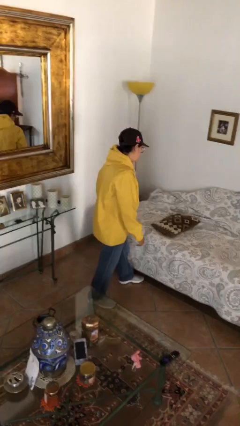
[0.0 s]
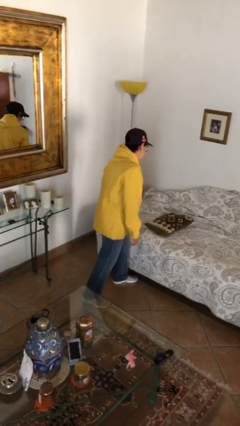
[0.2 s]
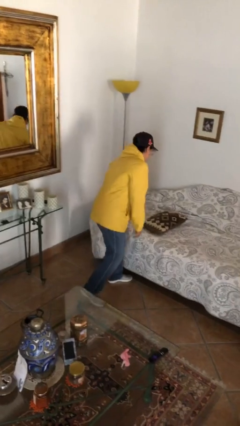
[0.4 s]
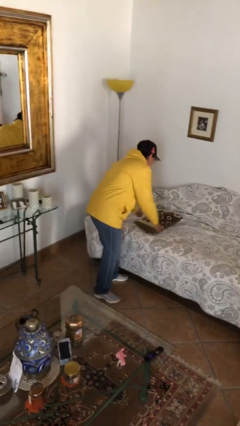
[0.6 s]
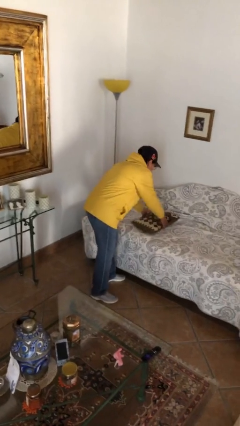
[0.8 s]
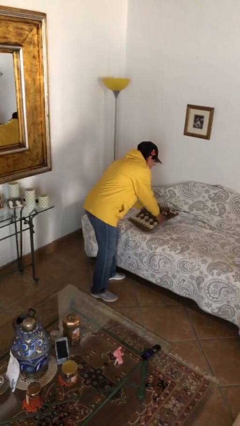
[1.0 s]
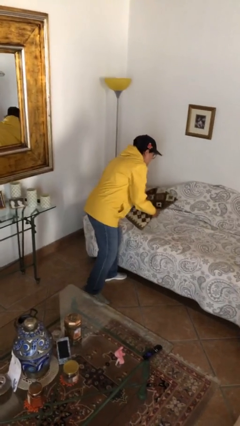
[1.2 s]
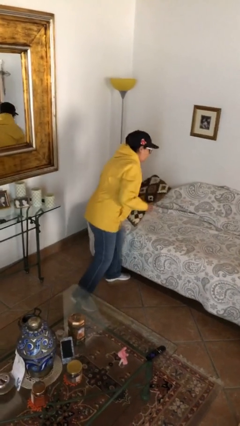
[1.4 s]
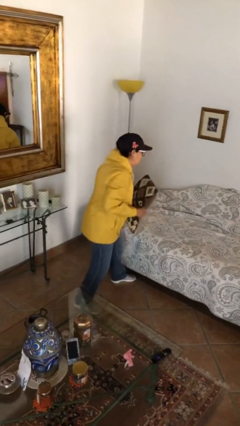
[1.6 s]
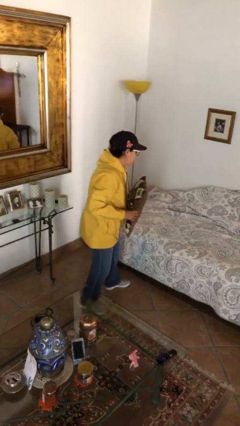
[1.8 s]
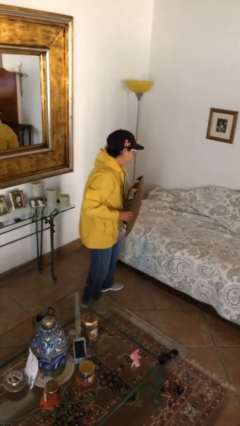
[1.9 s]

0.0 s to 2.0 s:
person picks up object from bed

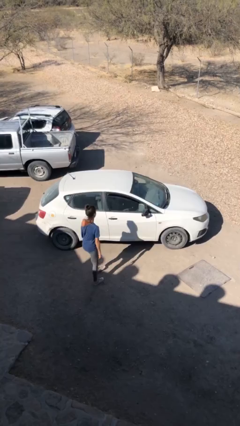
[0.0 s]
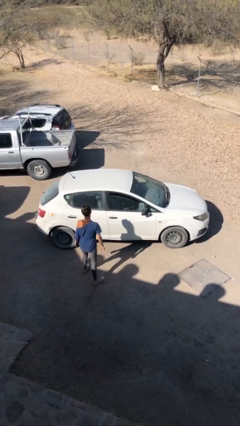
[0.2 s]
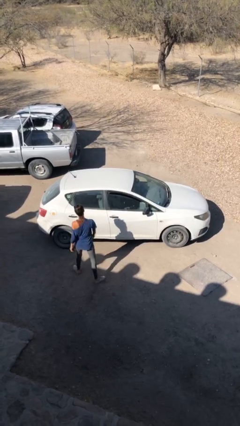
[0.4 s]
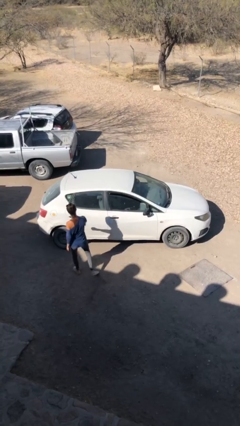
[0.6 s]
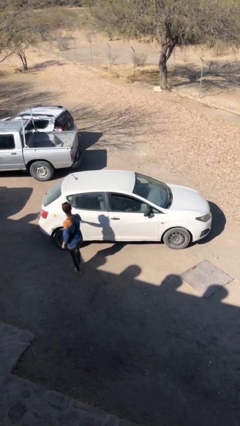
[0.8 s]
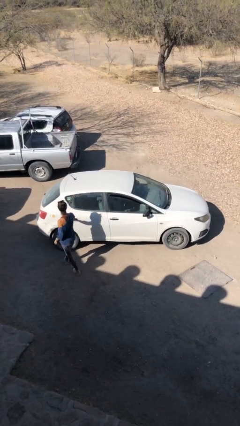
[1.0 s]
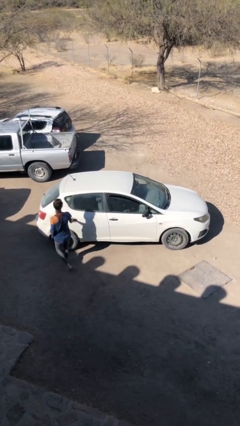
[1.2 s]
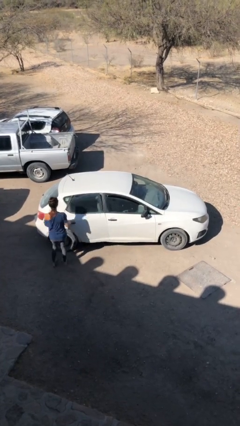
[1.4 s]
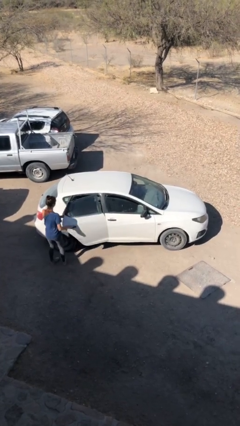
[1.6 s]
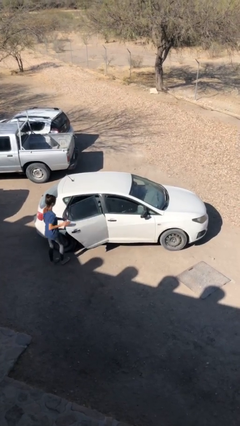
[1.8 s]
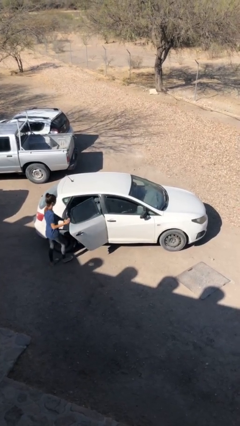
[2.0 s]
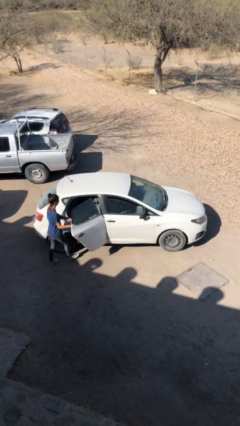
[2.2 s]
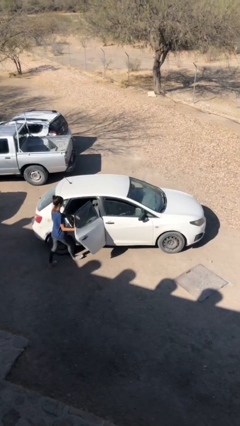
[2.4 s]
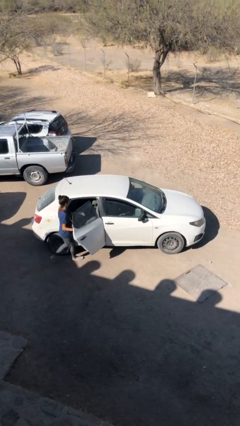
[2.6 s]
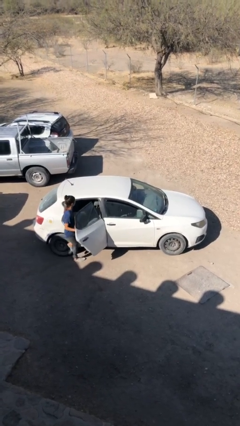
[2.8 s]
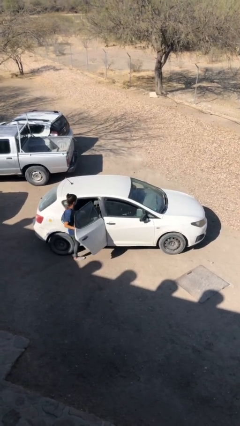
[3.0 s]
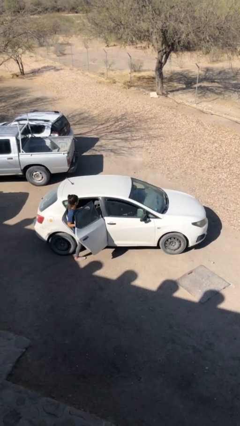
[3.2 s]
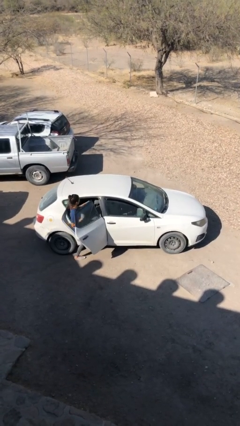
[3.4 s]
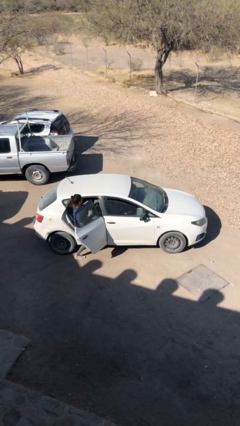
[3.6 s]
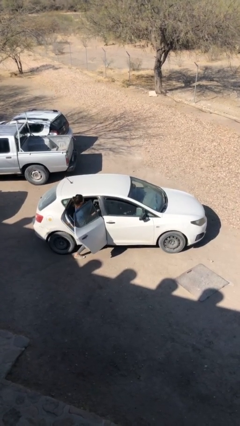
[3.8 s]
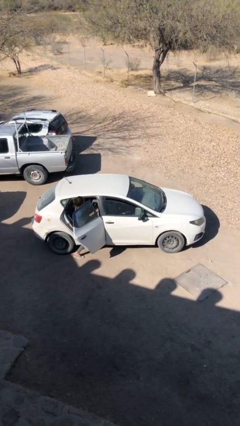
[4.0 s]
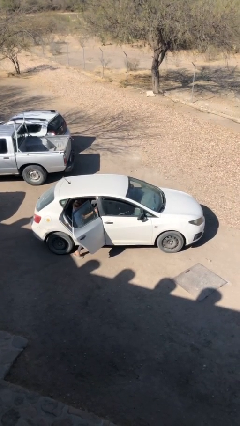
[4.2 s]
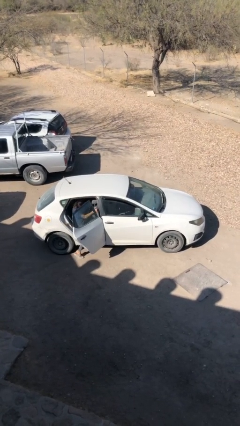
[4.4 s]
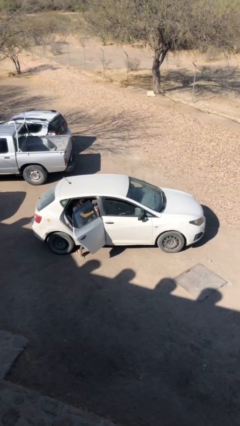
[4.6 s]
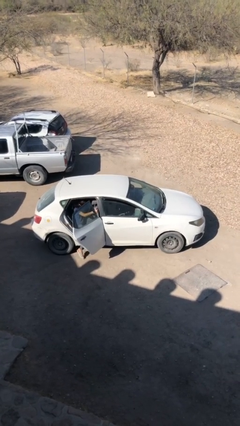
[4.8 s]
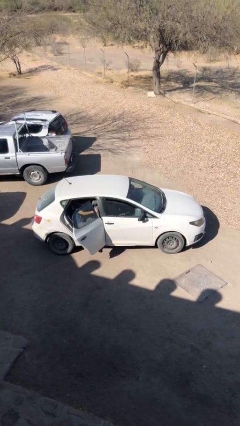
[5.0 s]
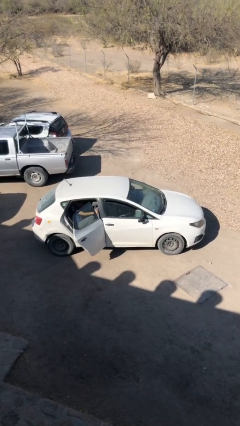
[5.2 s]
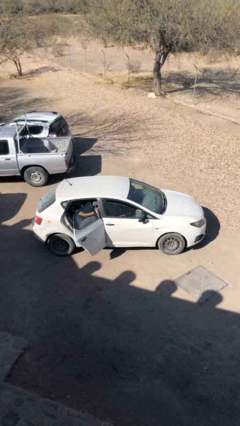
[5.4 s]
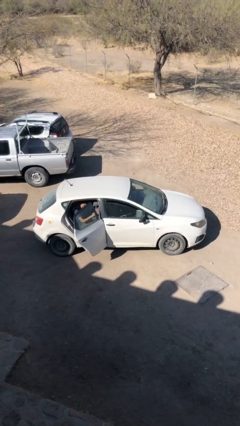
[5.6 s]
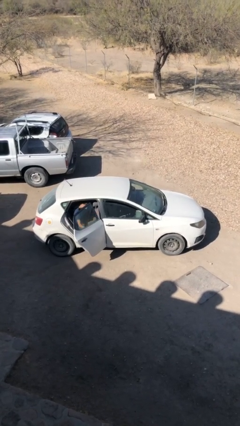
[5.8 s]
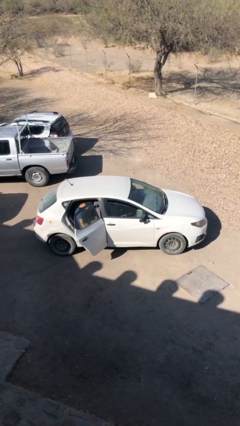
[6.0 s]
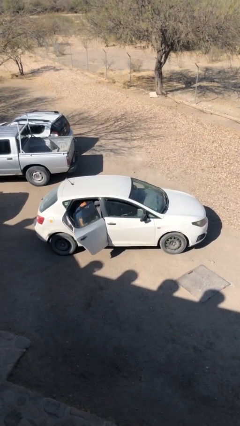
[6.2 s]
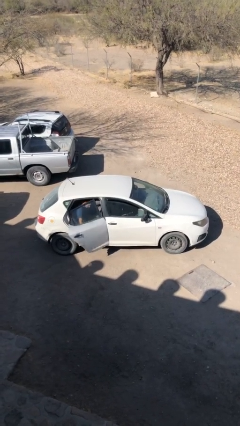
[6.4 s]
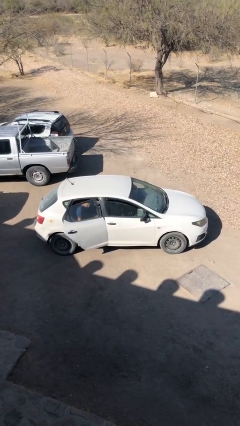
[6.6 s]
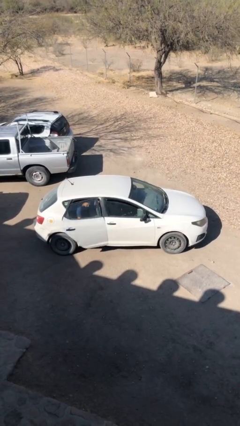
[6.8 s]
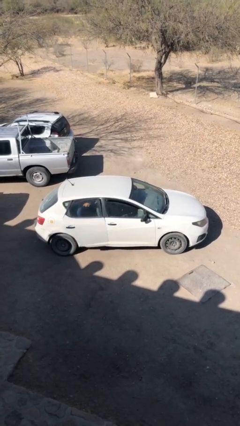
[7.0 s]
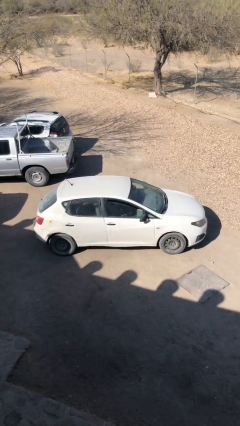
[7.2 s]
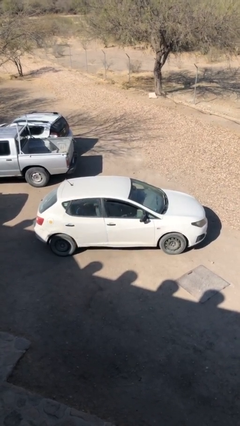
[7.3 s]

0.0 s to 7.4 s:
car picks up person

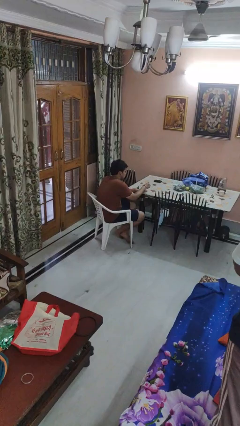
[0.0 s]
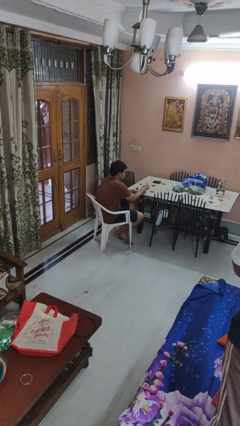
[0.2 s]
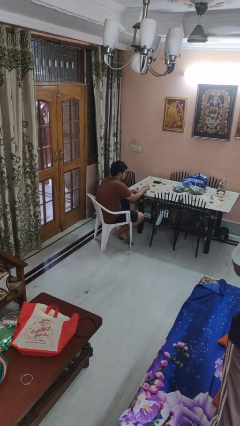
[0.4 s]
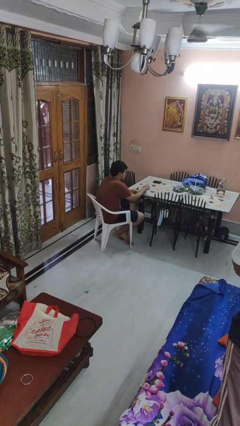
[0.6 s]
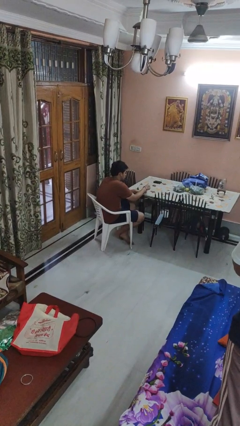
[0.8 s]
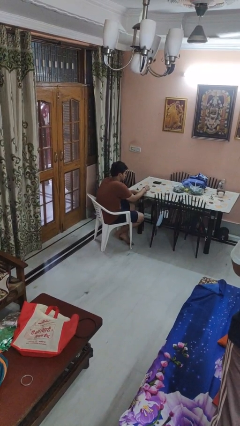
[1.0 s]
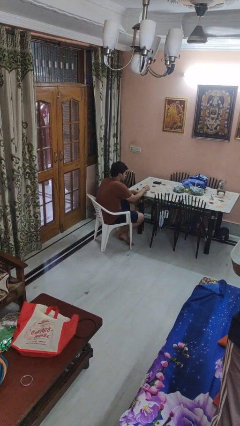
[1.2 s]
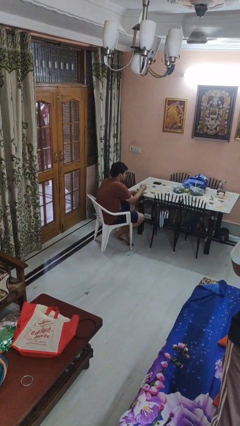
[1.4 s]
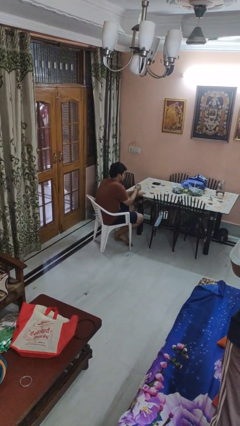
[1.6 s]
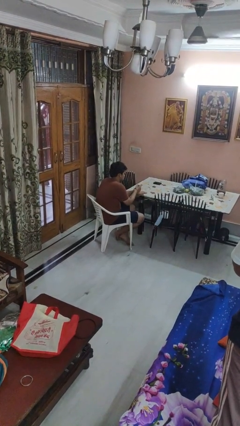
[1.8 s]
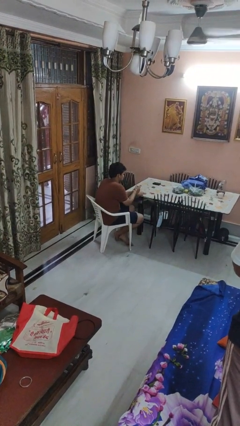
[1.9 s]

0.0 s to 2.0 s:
person paints fingernails

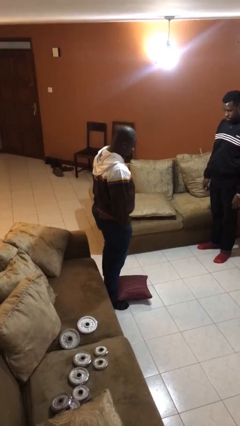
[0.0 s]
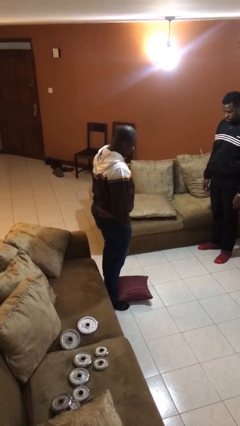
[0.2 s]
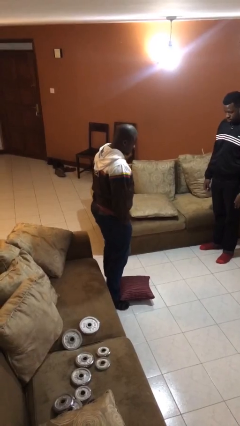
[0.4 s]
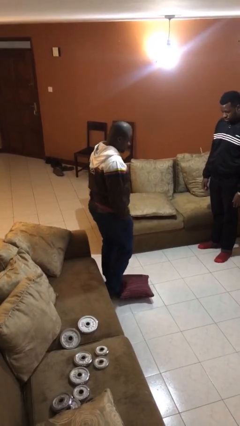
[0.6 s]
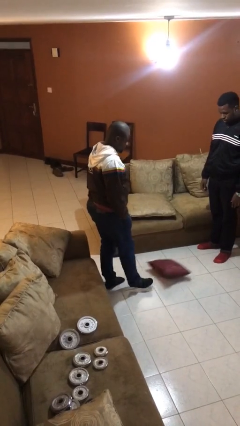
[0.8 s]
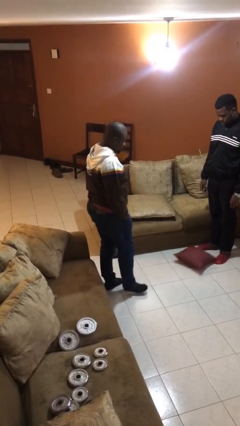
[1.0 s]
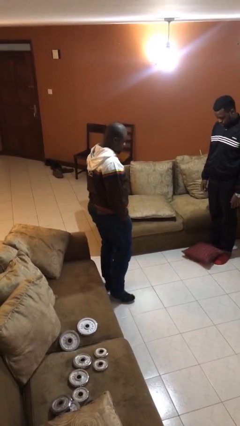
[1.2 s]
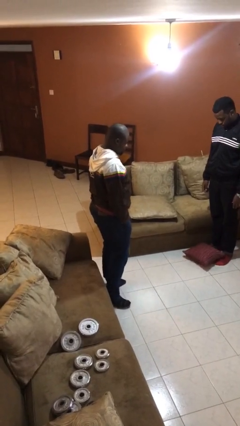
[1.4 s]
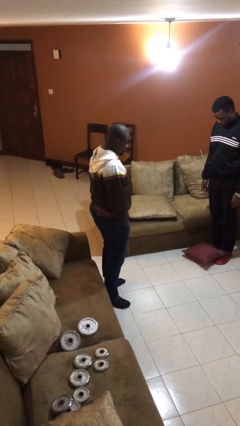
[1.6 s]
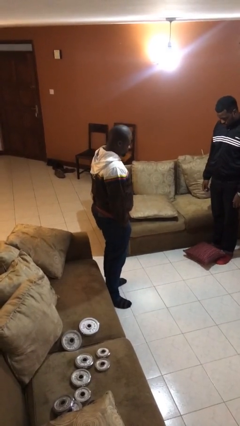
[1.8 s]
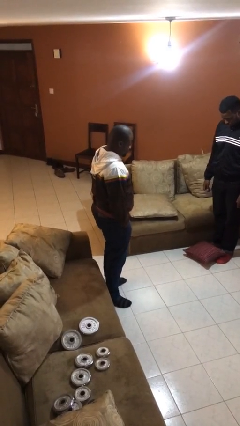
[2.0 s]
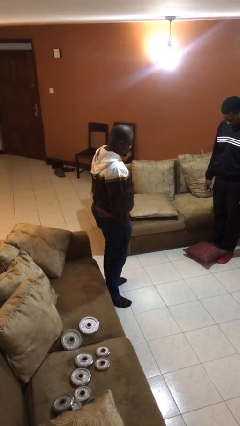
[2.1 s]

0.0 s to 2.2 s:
person kicks object to person

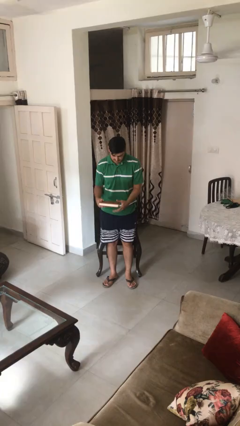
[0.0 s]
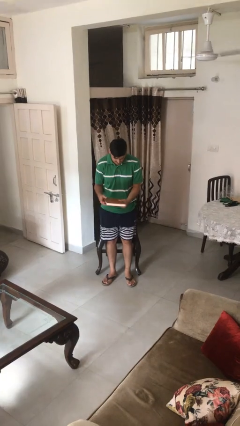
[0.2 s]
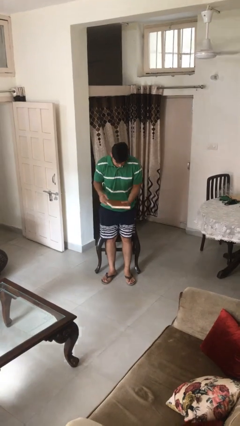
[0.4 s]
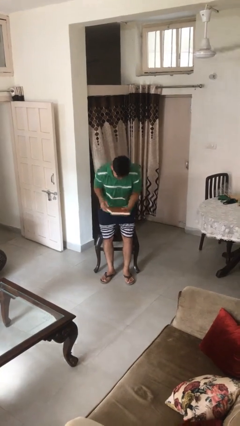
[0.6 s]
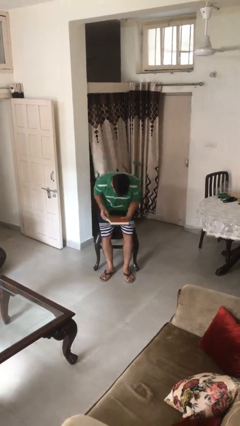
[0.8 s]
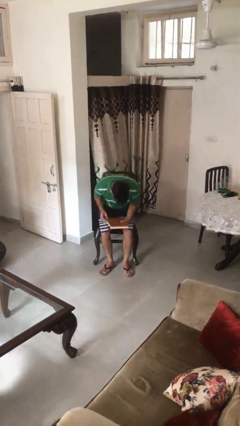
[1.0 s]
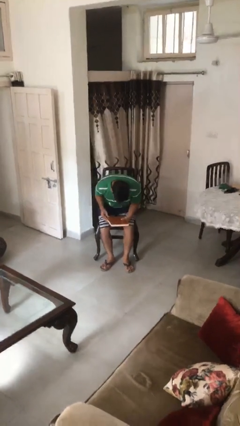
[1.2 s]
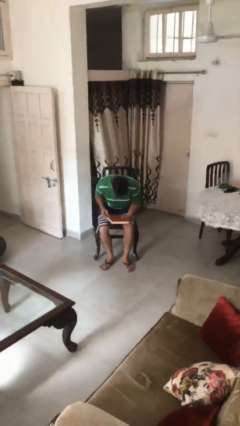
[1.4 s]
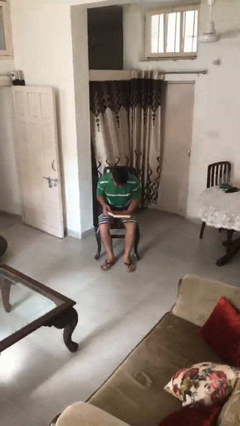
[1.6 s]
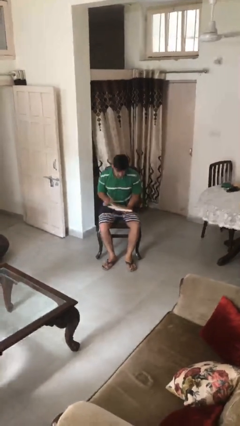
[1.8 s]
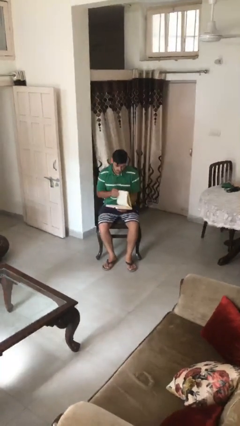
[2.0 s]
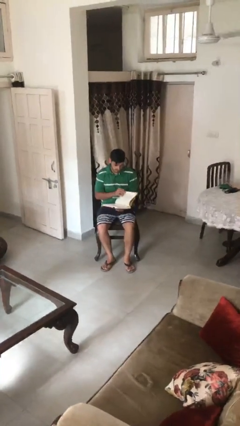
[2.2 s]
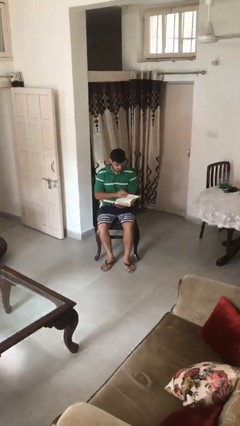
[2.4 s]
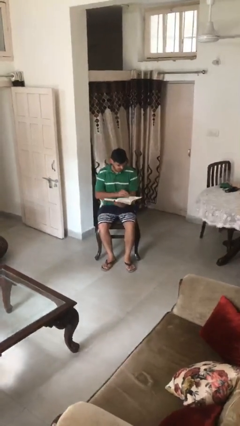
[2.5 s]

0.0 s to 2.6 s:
person sits down

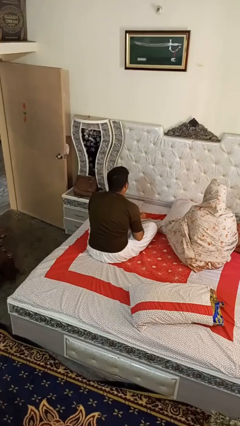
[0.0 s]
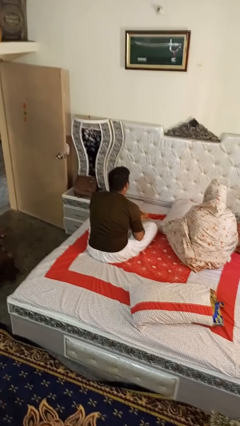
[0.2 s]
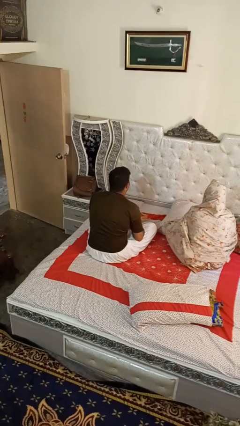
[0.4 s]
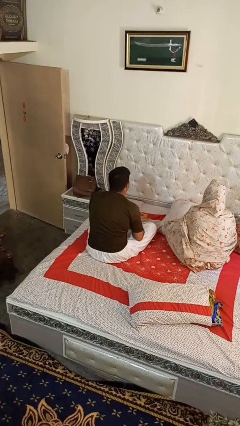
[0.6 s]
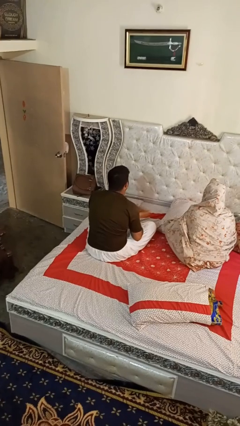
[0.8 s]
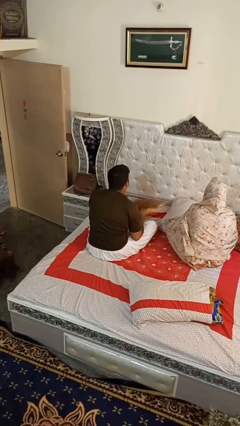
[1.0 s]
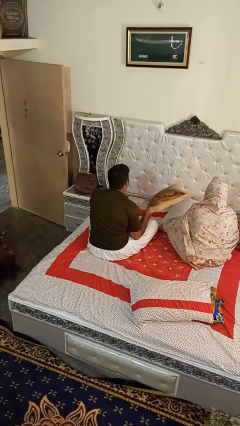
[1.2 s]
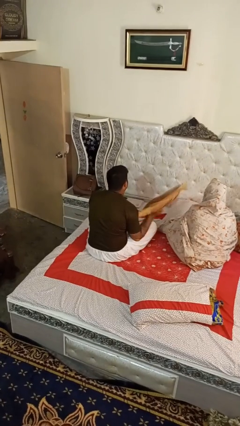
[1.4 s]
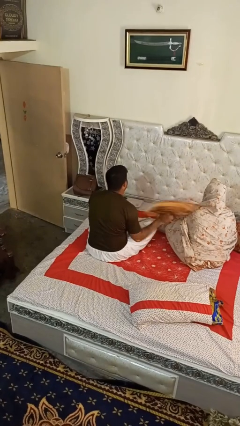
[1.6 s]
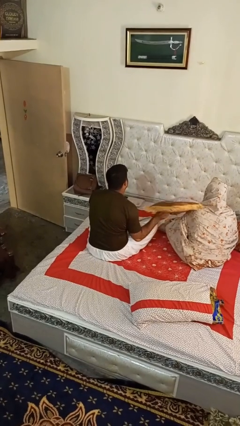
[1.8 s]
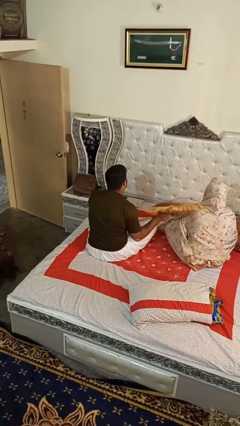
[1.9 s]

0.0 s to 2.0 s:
person hits person with pillow
